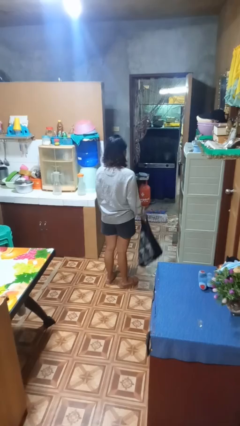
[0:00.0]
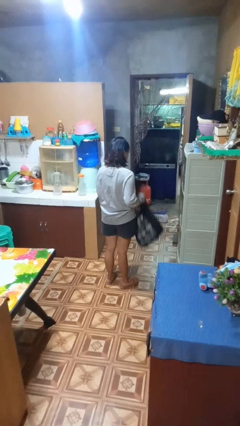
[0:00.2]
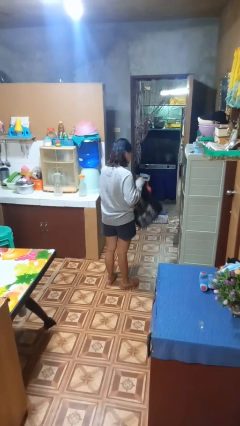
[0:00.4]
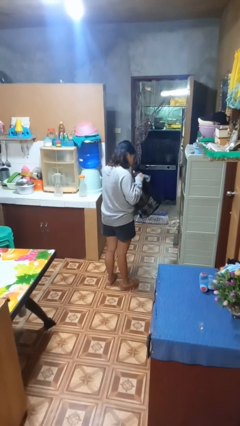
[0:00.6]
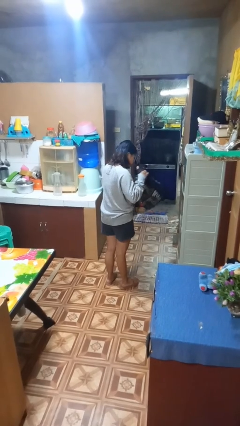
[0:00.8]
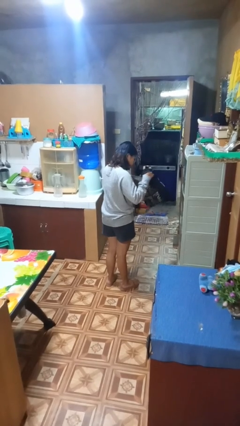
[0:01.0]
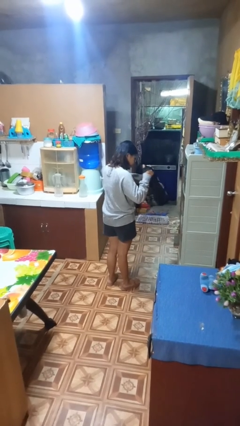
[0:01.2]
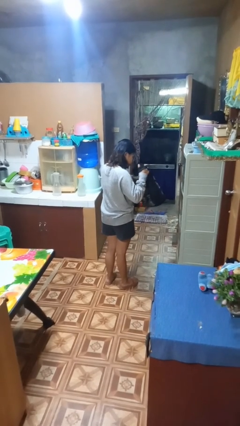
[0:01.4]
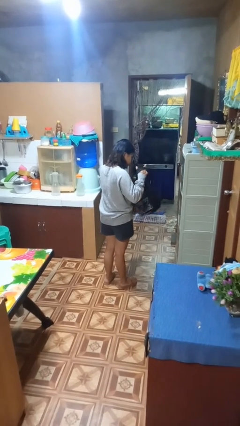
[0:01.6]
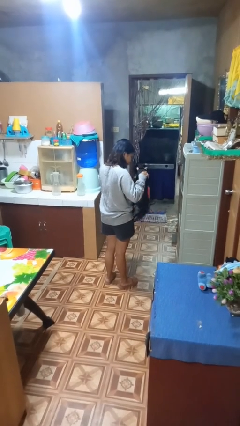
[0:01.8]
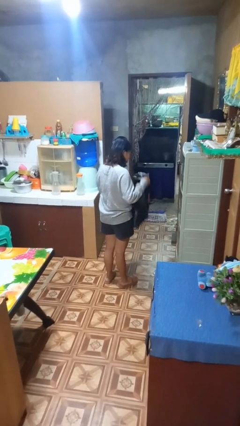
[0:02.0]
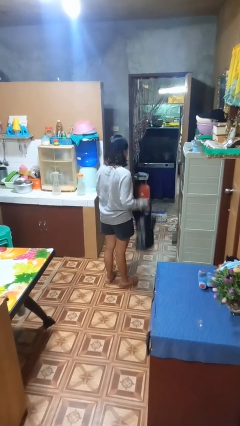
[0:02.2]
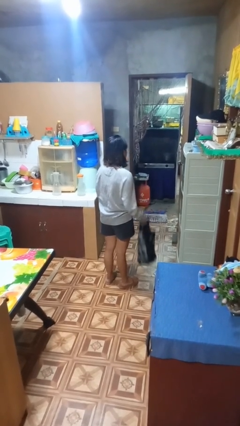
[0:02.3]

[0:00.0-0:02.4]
person searches in bag

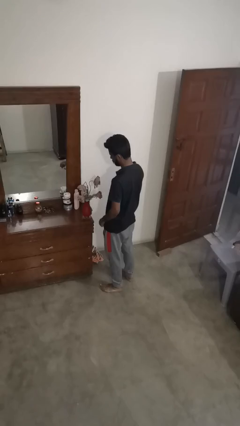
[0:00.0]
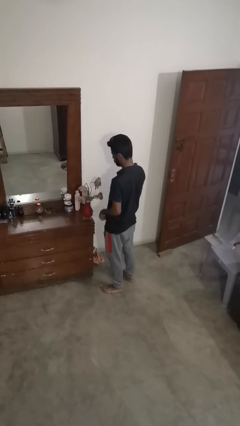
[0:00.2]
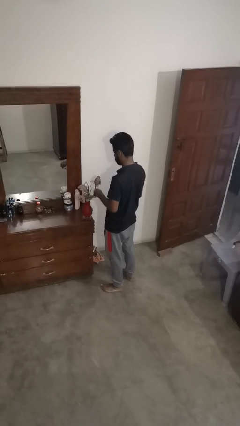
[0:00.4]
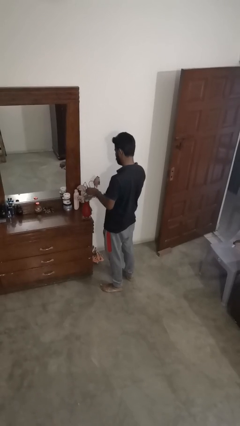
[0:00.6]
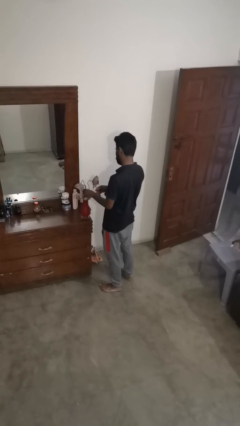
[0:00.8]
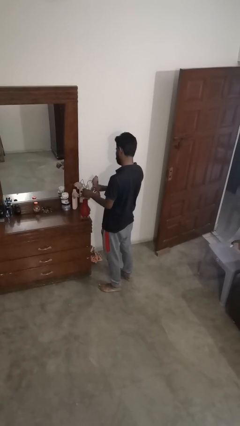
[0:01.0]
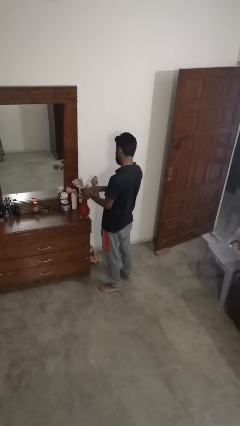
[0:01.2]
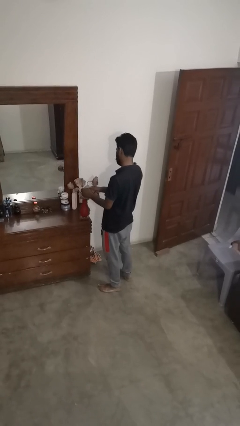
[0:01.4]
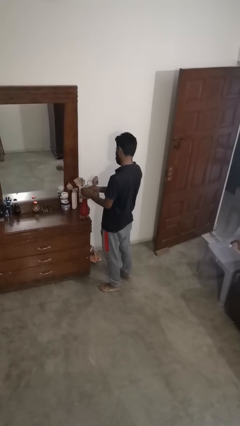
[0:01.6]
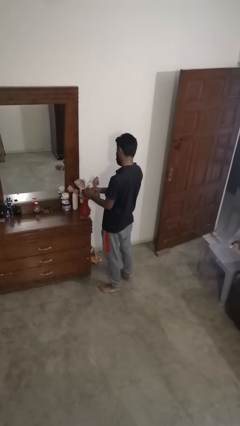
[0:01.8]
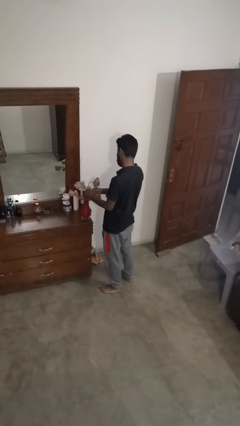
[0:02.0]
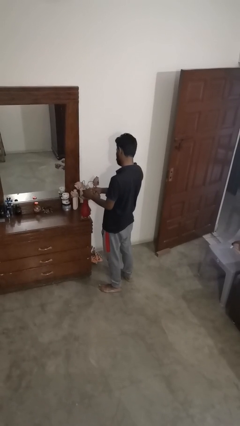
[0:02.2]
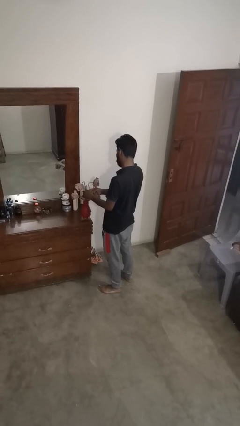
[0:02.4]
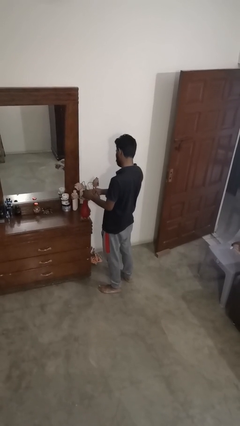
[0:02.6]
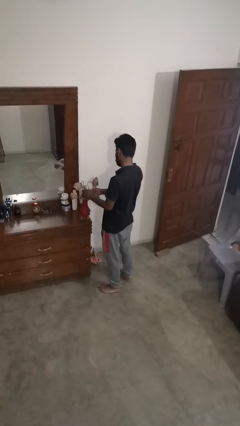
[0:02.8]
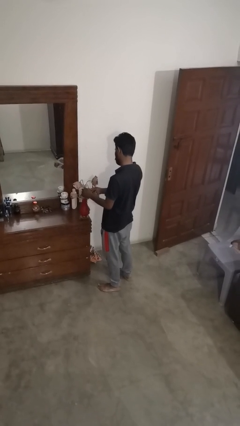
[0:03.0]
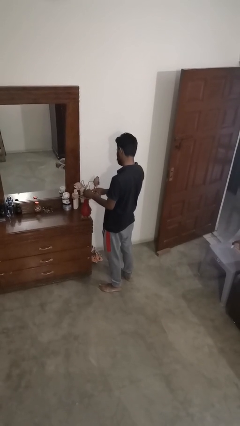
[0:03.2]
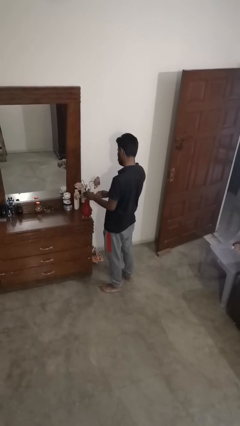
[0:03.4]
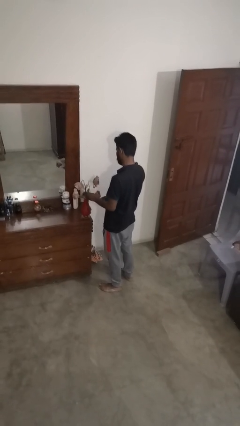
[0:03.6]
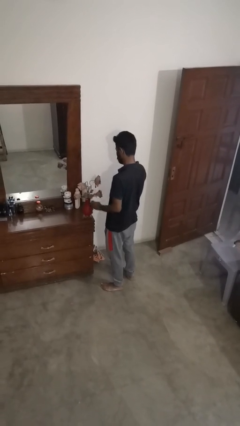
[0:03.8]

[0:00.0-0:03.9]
person arranges flowers in vase

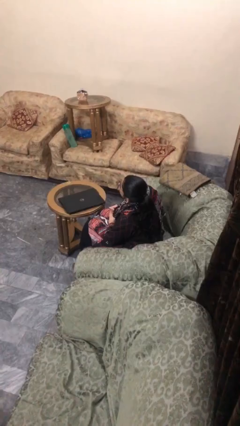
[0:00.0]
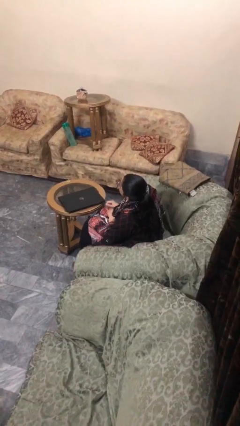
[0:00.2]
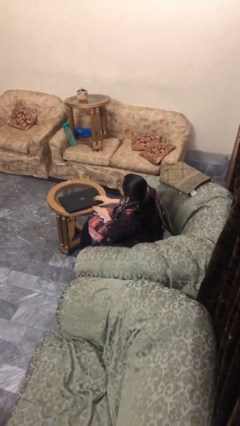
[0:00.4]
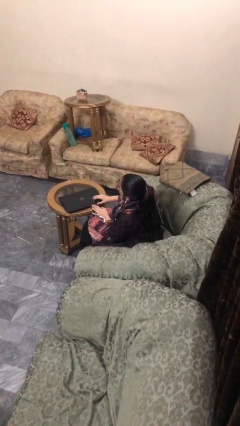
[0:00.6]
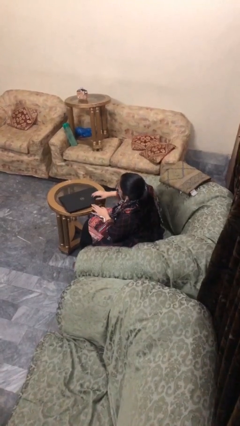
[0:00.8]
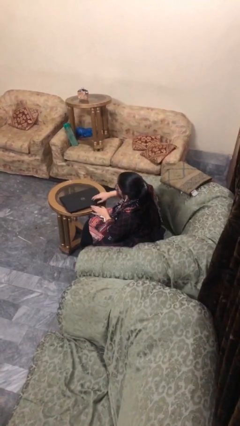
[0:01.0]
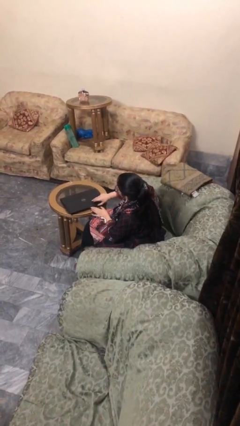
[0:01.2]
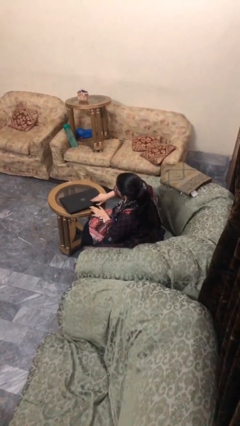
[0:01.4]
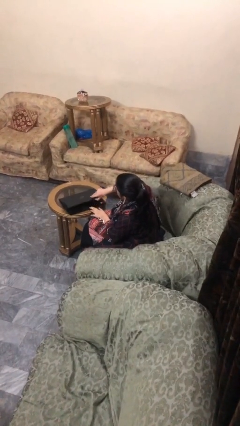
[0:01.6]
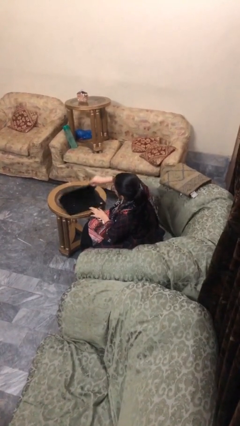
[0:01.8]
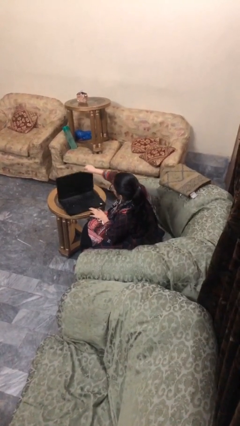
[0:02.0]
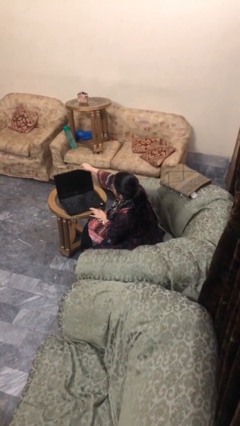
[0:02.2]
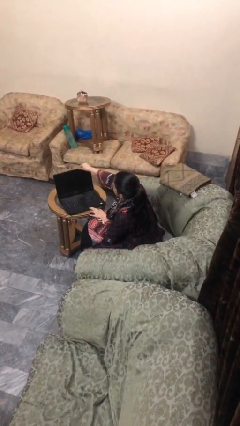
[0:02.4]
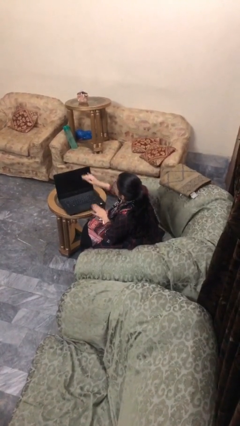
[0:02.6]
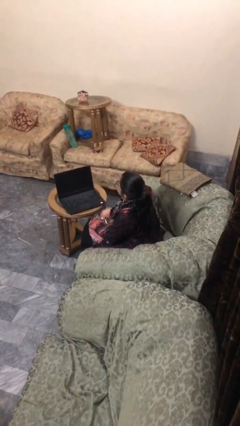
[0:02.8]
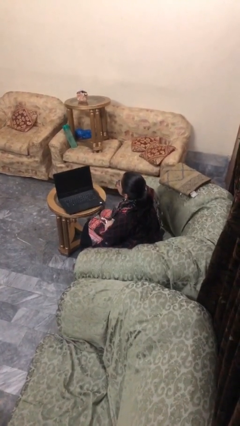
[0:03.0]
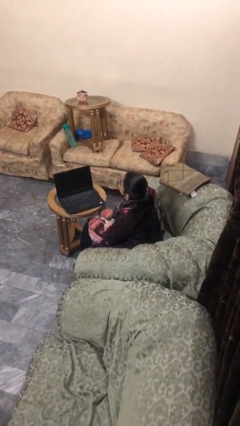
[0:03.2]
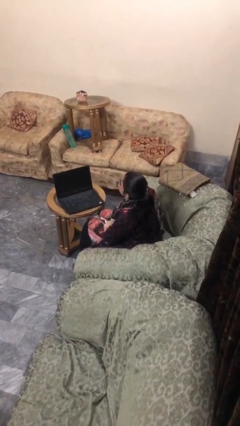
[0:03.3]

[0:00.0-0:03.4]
person opens laptop

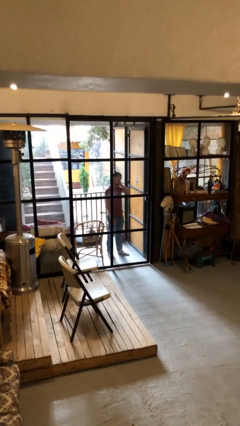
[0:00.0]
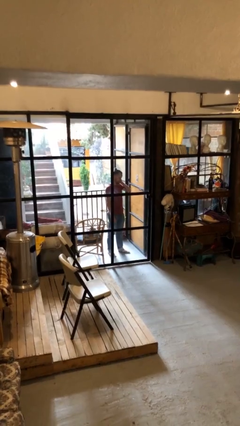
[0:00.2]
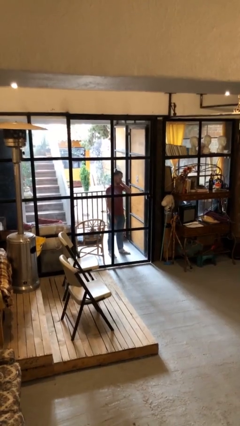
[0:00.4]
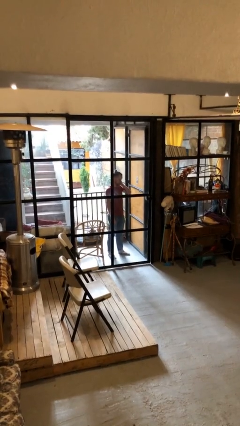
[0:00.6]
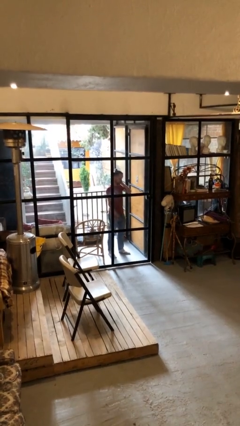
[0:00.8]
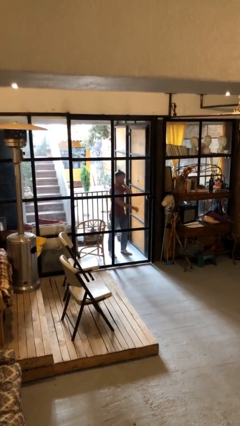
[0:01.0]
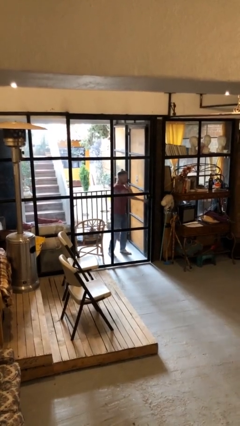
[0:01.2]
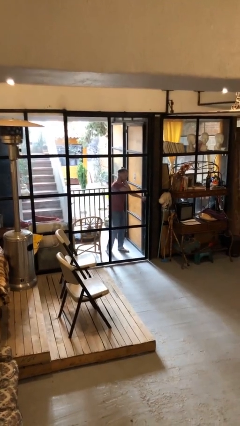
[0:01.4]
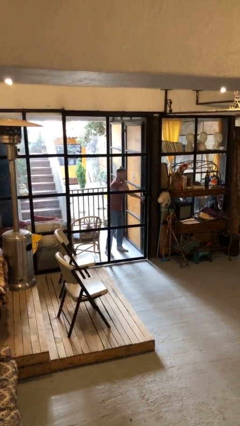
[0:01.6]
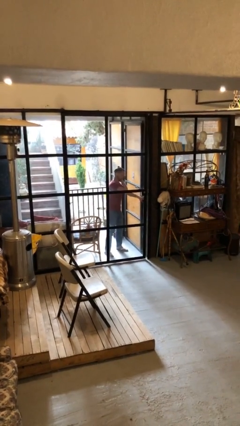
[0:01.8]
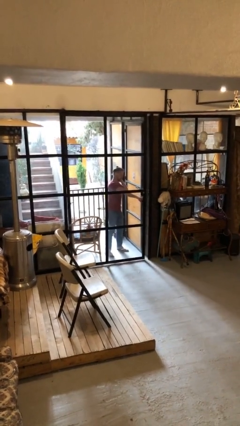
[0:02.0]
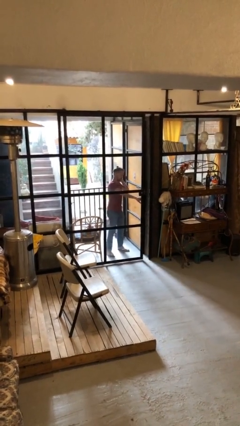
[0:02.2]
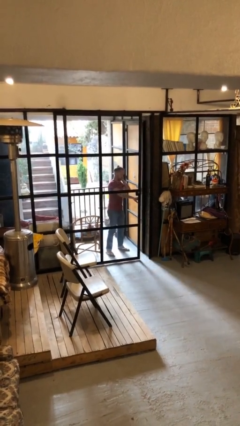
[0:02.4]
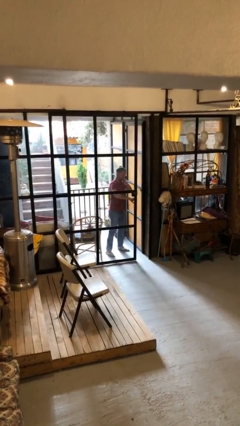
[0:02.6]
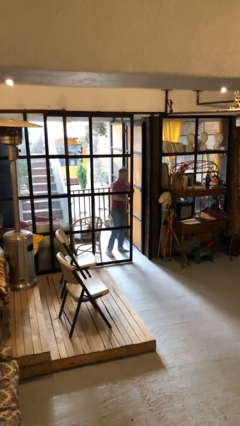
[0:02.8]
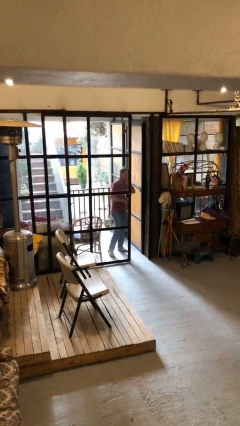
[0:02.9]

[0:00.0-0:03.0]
person opens facility door

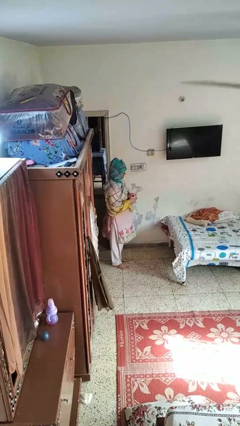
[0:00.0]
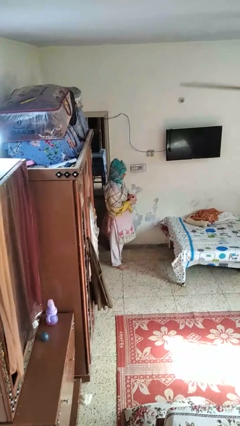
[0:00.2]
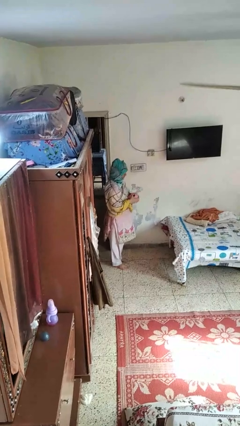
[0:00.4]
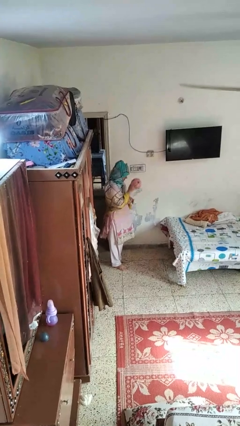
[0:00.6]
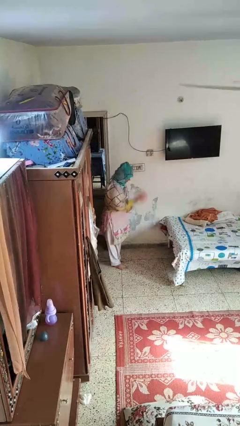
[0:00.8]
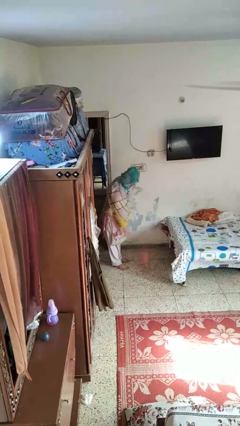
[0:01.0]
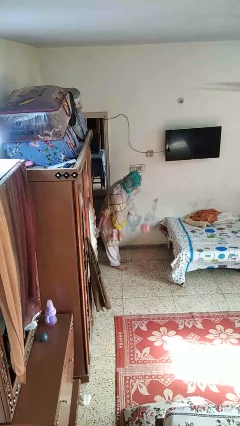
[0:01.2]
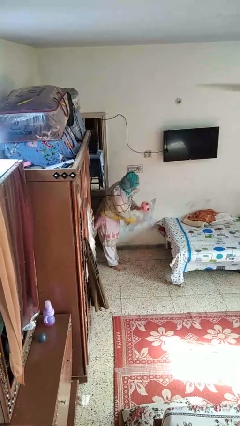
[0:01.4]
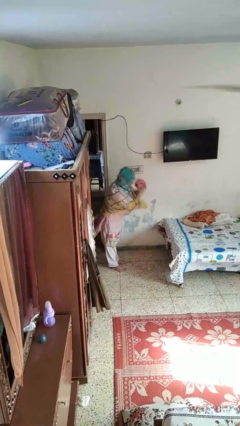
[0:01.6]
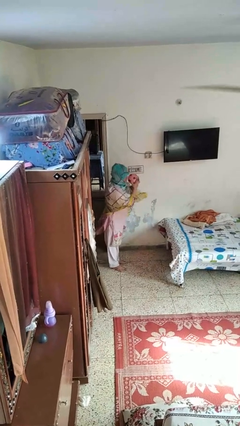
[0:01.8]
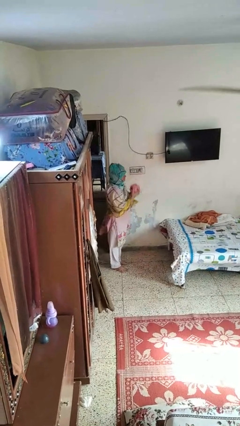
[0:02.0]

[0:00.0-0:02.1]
person bounces ball on floor

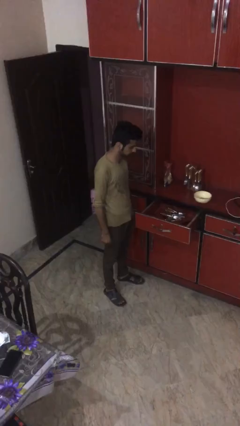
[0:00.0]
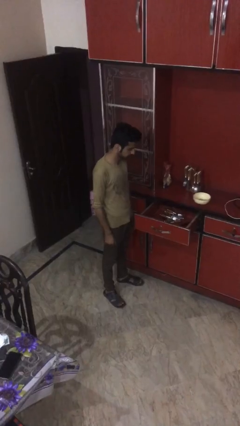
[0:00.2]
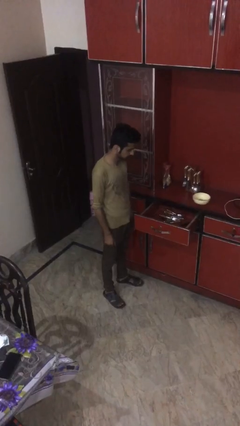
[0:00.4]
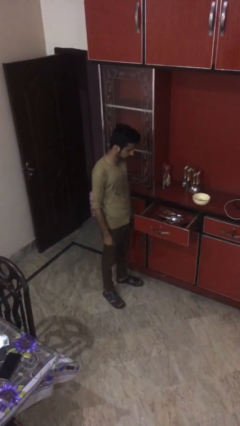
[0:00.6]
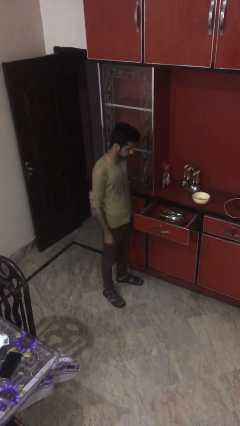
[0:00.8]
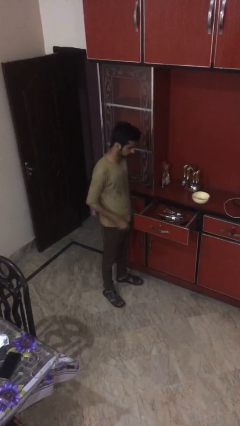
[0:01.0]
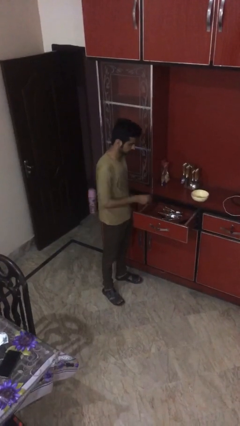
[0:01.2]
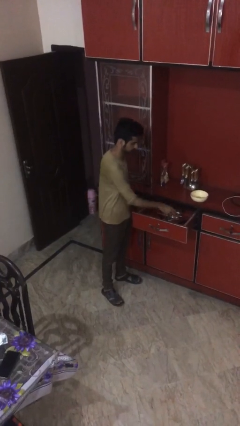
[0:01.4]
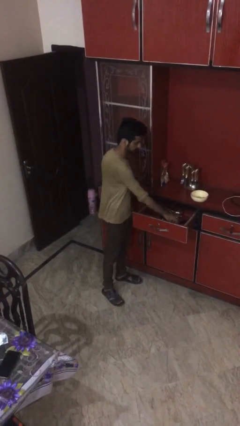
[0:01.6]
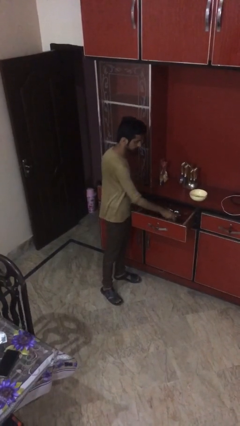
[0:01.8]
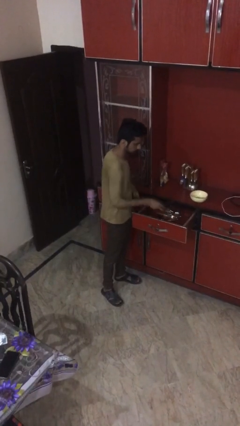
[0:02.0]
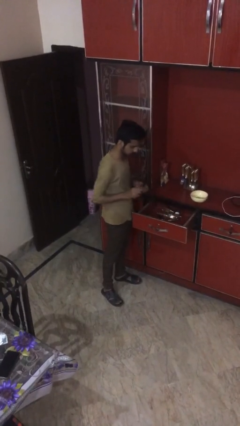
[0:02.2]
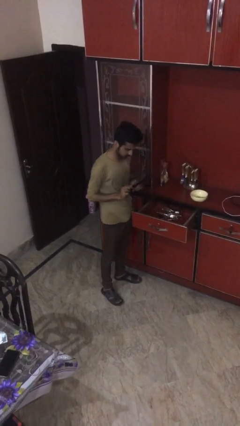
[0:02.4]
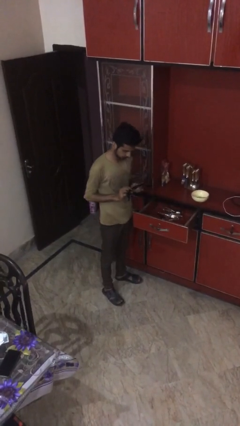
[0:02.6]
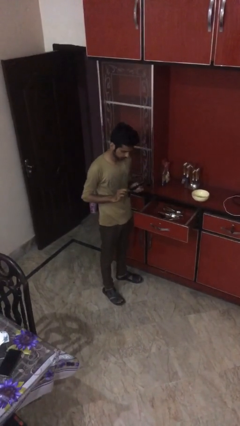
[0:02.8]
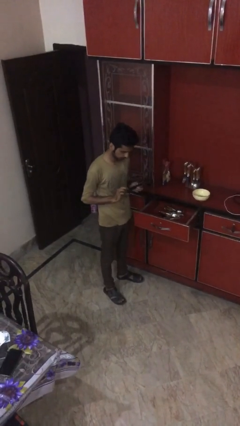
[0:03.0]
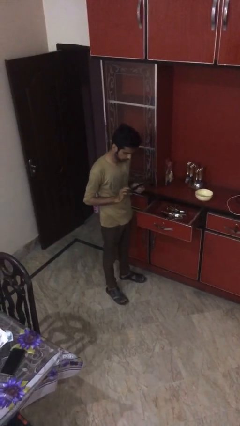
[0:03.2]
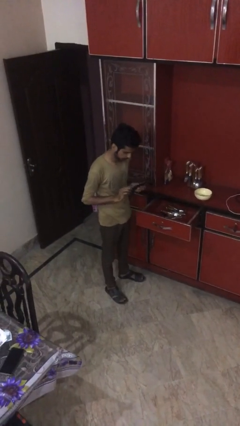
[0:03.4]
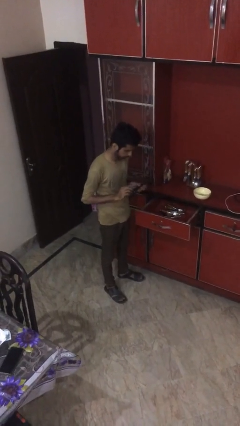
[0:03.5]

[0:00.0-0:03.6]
person takes object from kitchen drawer
